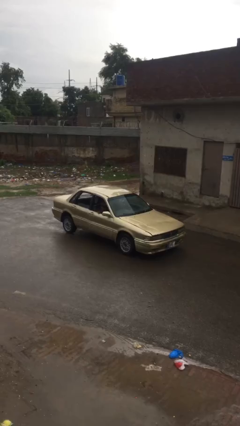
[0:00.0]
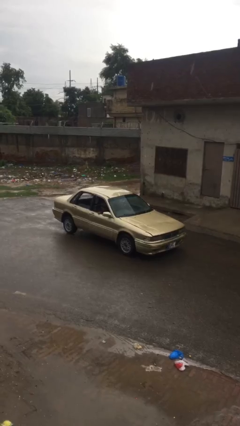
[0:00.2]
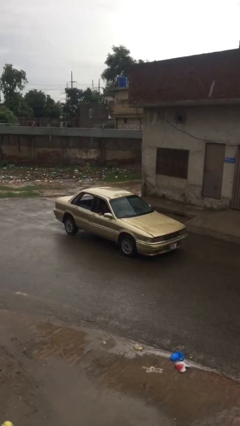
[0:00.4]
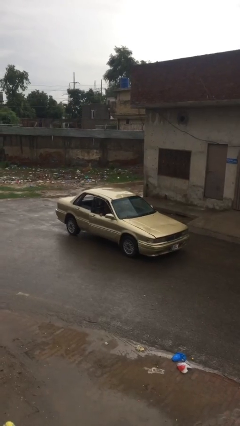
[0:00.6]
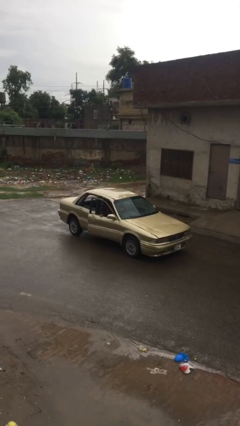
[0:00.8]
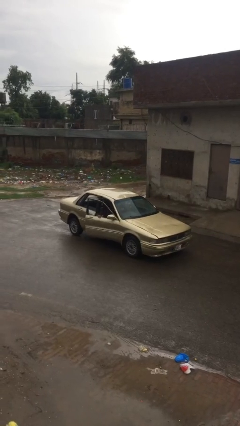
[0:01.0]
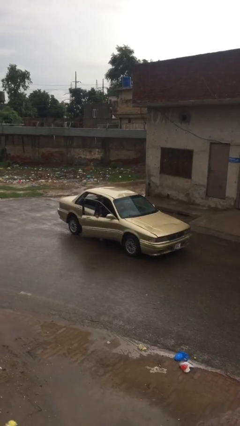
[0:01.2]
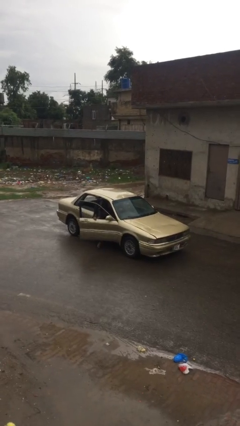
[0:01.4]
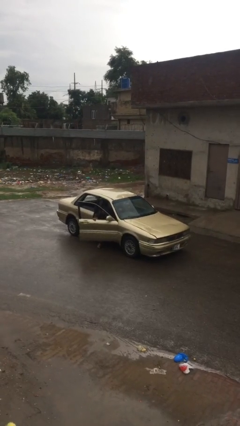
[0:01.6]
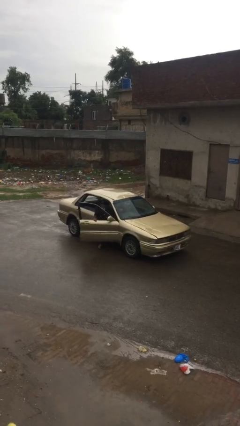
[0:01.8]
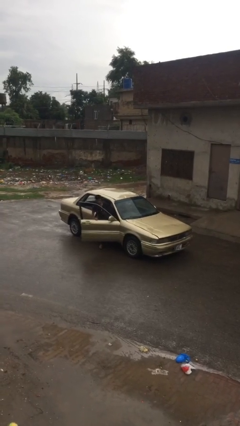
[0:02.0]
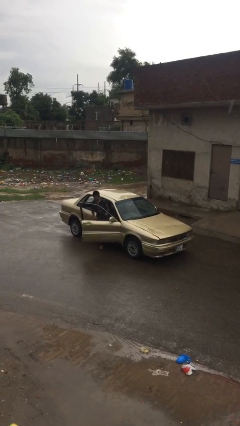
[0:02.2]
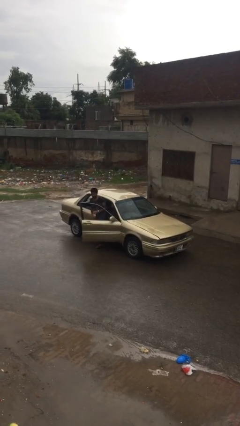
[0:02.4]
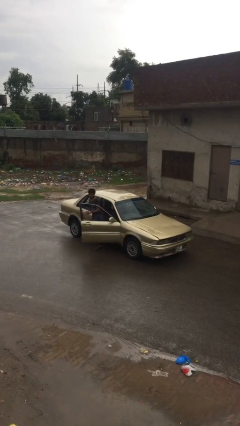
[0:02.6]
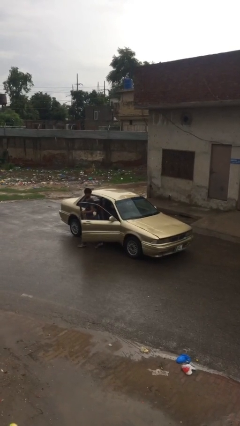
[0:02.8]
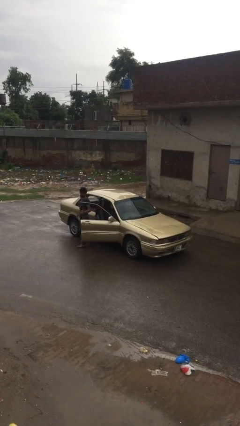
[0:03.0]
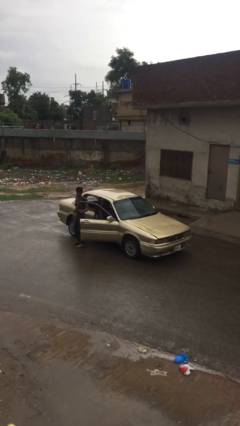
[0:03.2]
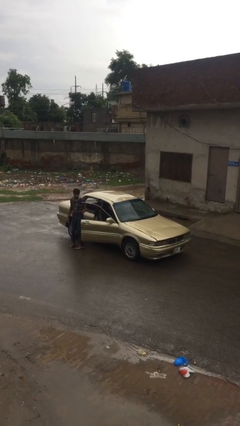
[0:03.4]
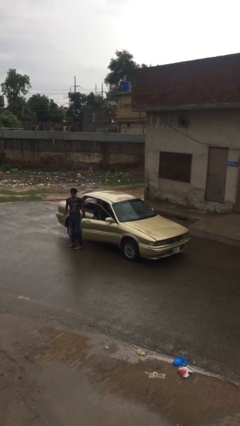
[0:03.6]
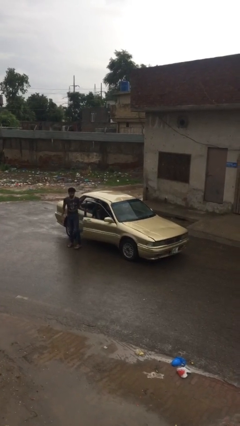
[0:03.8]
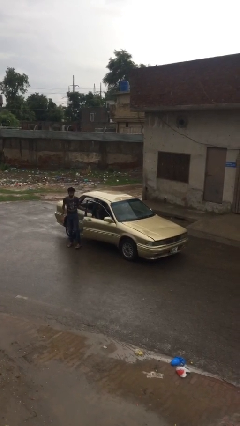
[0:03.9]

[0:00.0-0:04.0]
car drops off person

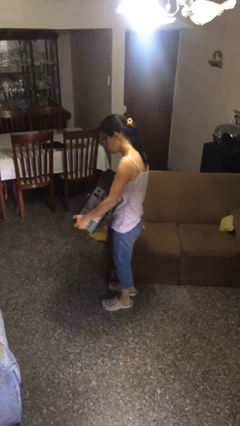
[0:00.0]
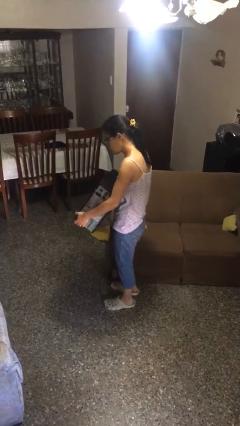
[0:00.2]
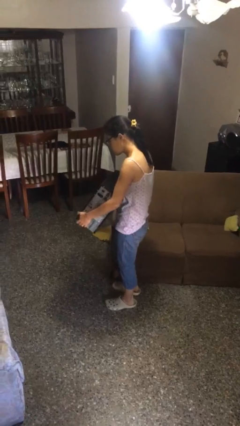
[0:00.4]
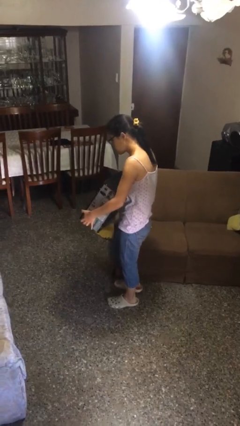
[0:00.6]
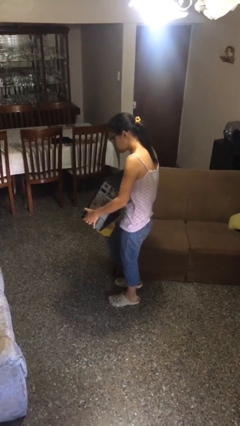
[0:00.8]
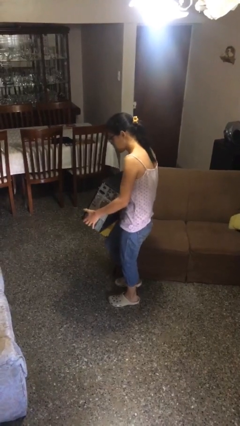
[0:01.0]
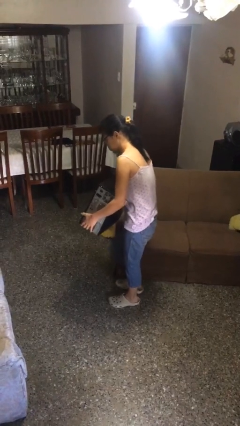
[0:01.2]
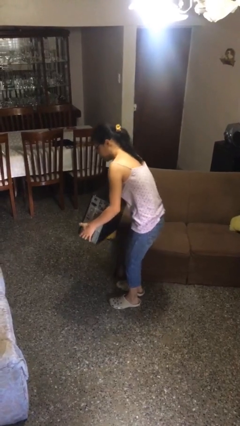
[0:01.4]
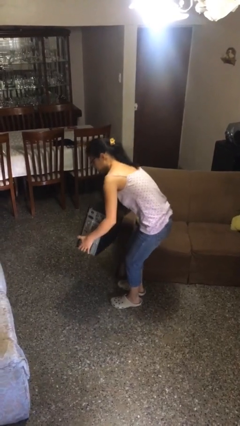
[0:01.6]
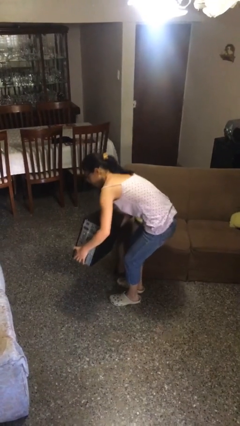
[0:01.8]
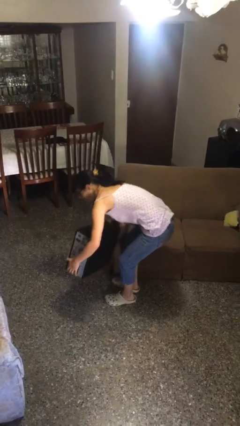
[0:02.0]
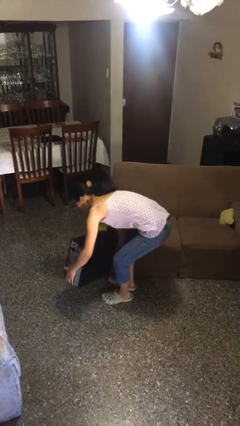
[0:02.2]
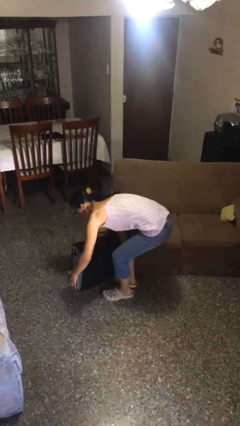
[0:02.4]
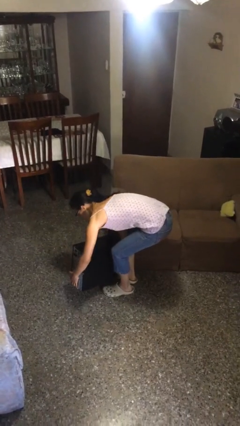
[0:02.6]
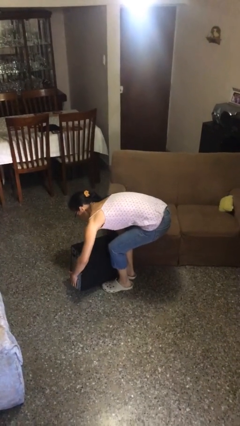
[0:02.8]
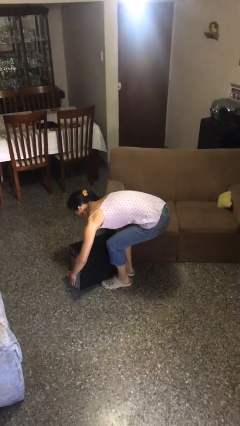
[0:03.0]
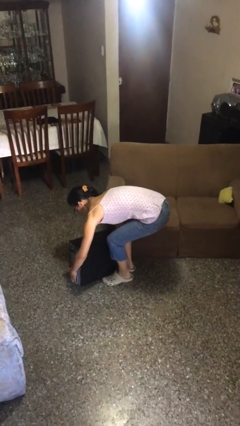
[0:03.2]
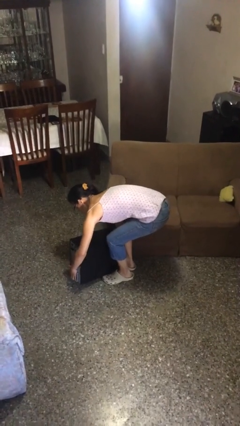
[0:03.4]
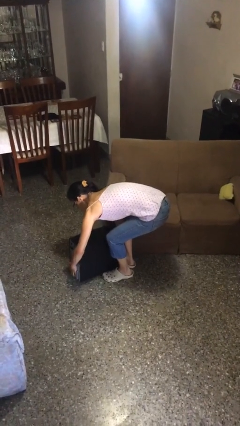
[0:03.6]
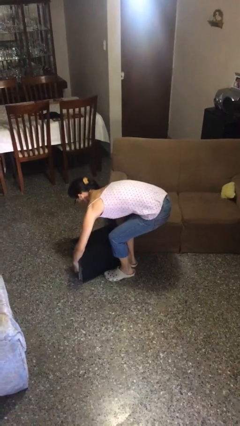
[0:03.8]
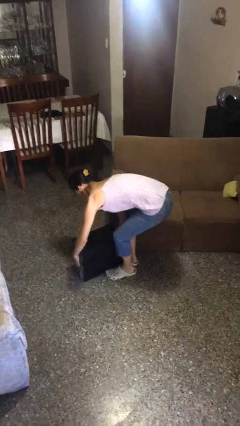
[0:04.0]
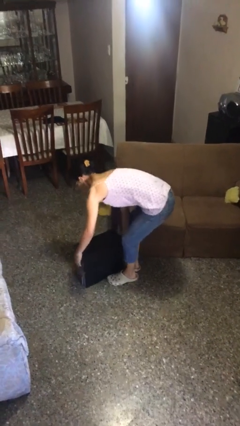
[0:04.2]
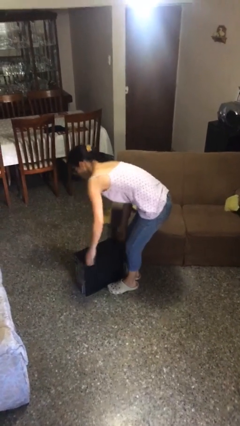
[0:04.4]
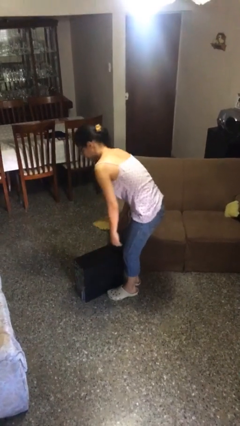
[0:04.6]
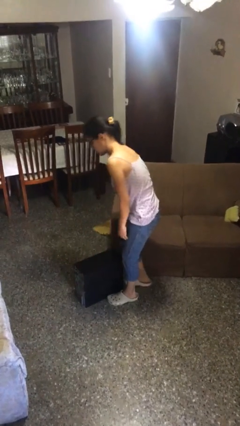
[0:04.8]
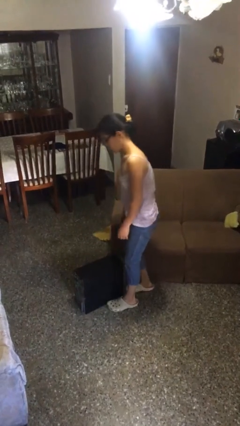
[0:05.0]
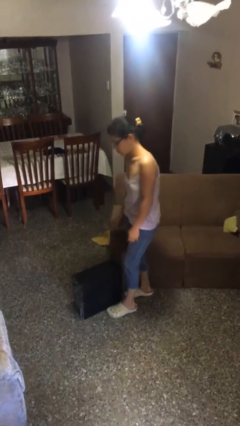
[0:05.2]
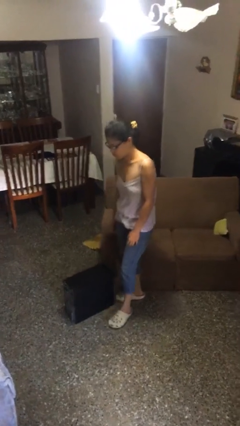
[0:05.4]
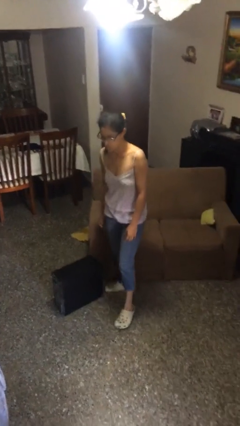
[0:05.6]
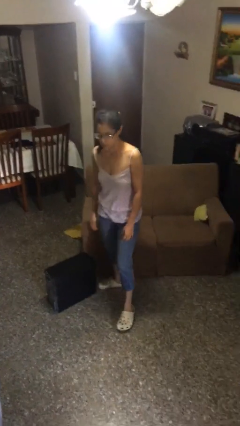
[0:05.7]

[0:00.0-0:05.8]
person puts down object on floor

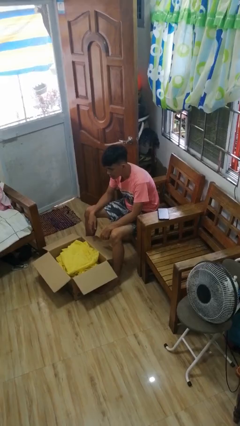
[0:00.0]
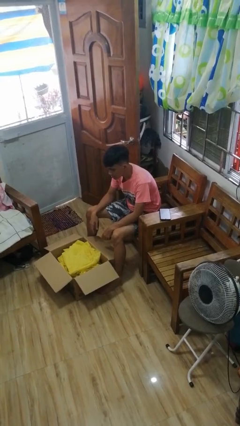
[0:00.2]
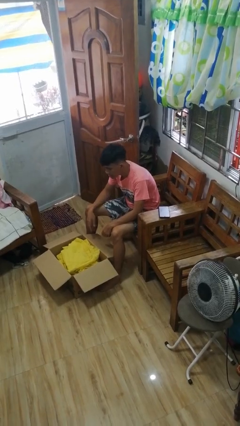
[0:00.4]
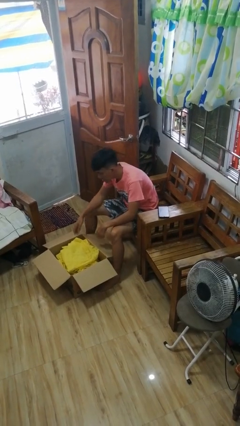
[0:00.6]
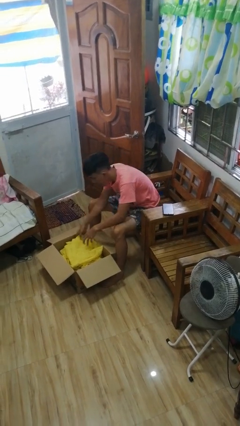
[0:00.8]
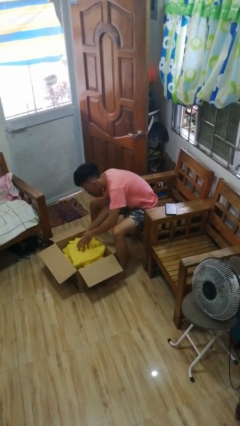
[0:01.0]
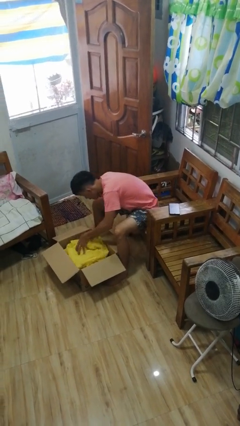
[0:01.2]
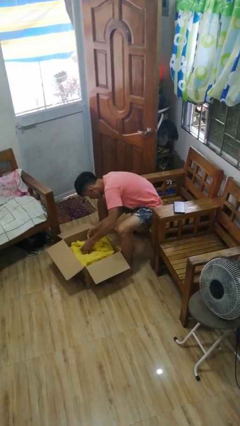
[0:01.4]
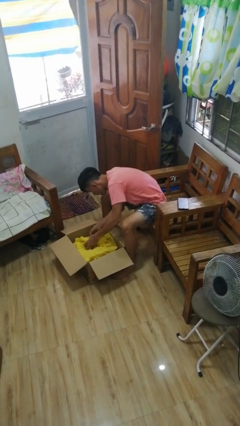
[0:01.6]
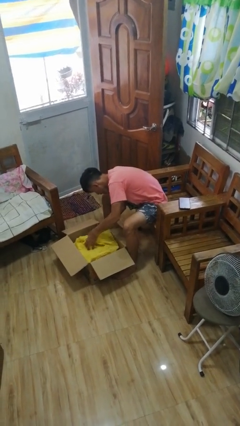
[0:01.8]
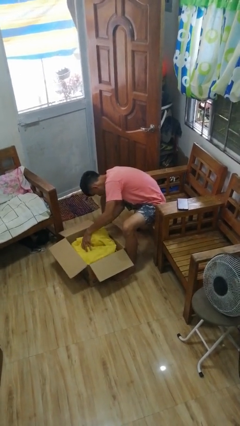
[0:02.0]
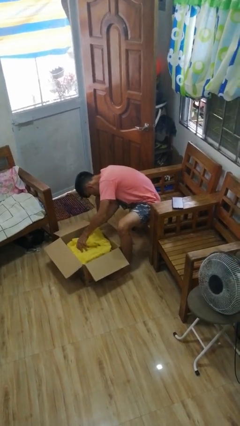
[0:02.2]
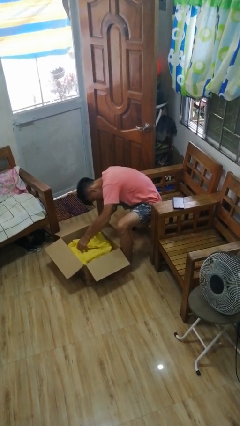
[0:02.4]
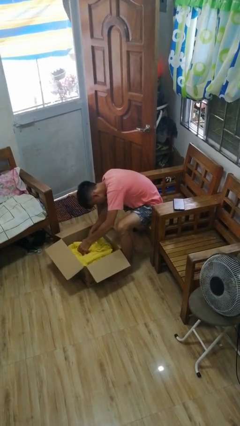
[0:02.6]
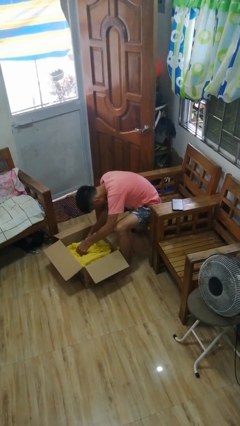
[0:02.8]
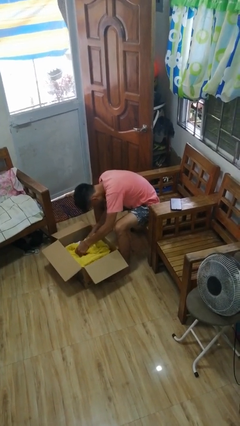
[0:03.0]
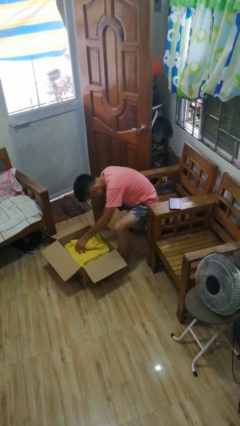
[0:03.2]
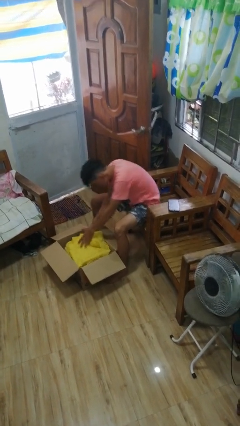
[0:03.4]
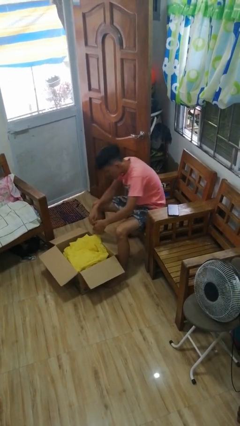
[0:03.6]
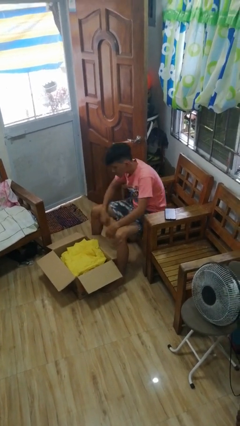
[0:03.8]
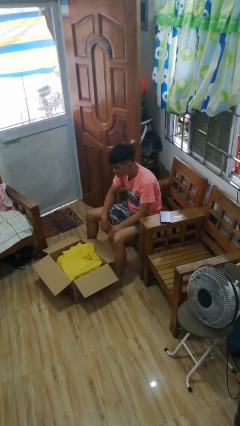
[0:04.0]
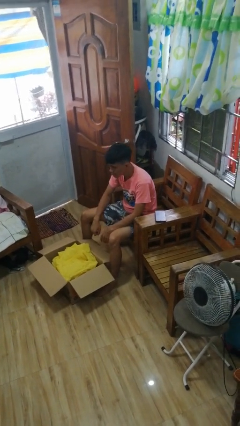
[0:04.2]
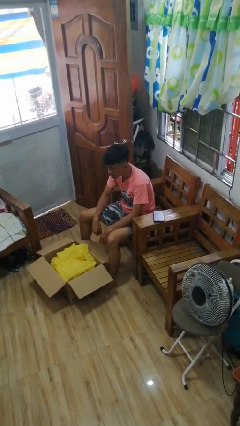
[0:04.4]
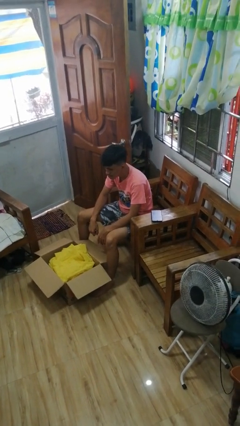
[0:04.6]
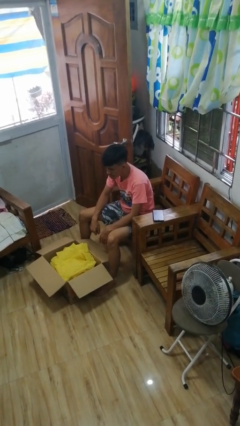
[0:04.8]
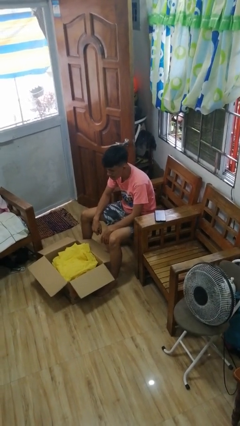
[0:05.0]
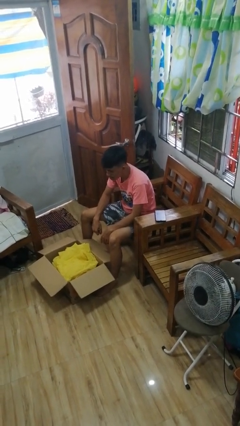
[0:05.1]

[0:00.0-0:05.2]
person searches in box

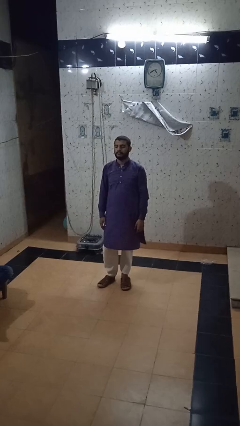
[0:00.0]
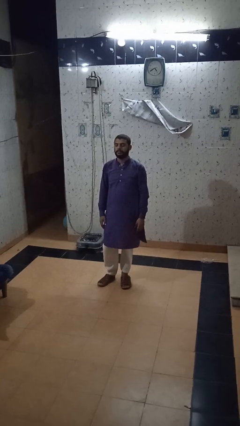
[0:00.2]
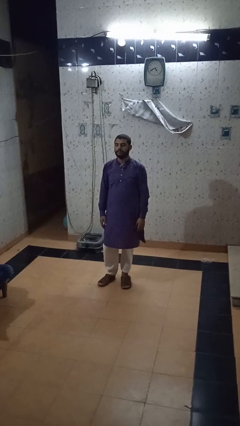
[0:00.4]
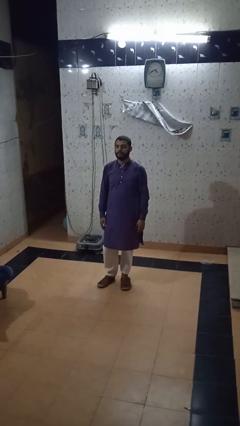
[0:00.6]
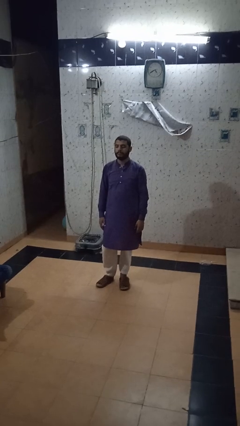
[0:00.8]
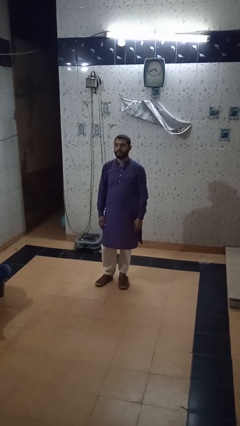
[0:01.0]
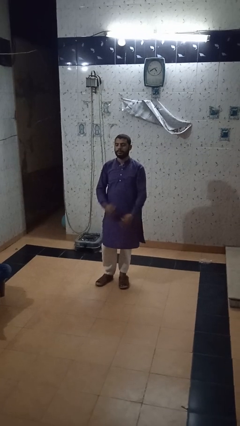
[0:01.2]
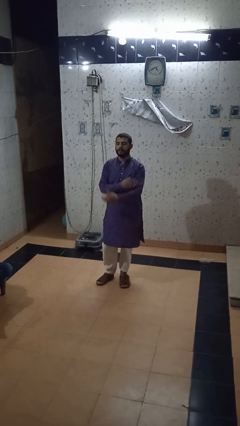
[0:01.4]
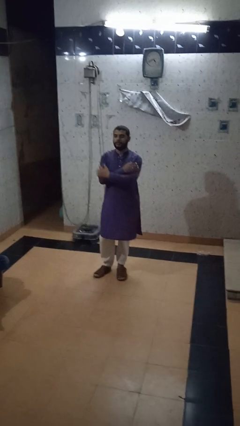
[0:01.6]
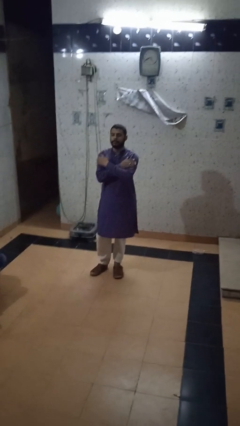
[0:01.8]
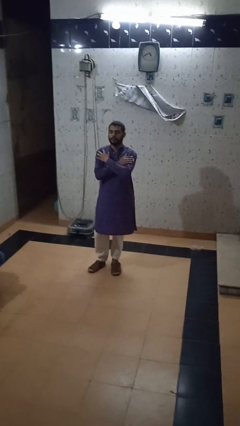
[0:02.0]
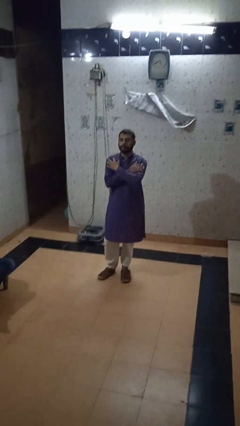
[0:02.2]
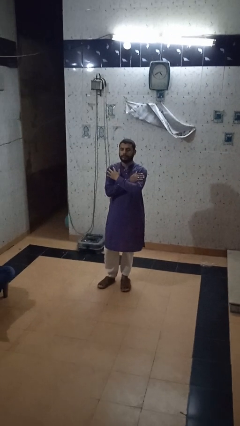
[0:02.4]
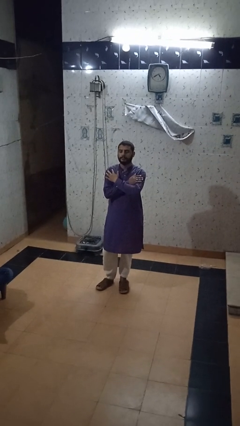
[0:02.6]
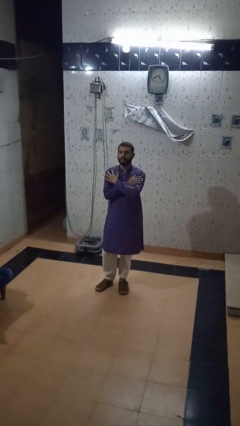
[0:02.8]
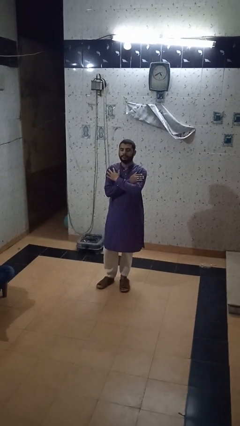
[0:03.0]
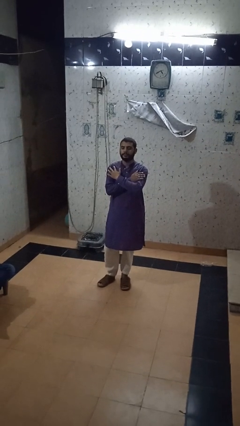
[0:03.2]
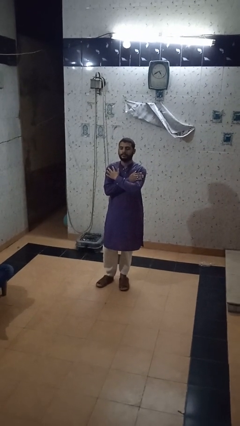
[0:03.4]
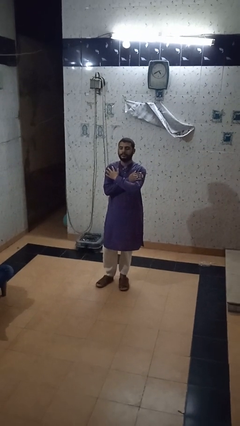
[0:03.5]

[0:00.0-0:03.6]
person crosses arms
